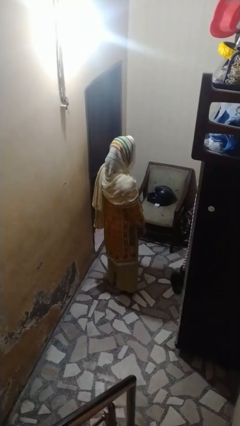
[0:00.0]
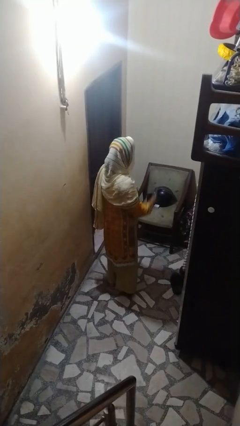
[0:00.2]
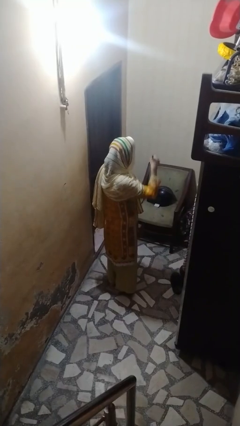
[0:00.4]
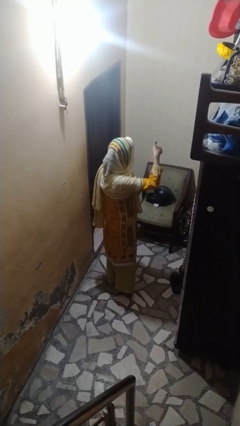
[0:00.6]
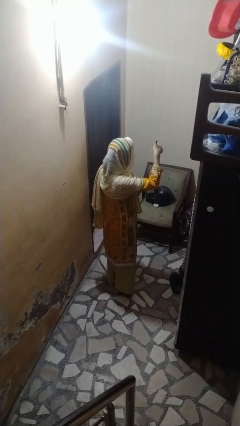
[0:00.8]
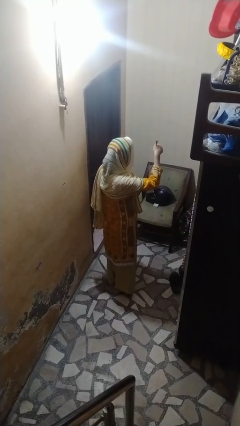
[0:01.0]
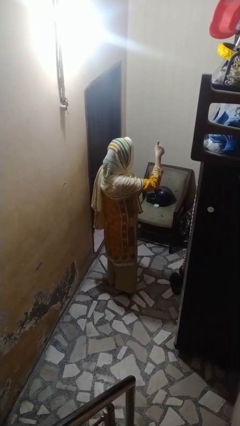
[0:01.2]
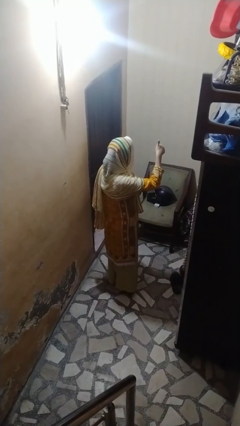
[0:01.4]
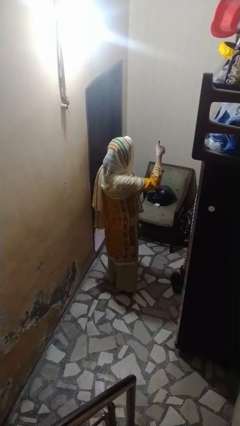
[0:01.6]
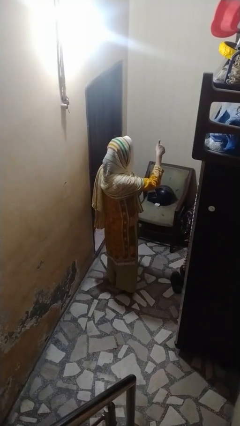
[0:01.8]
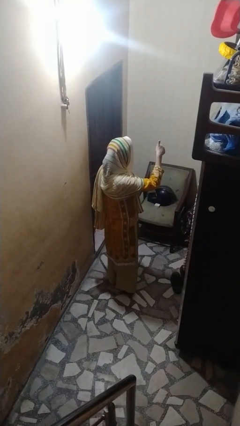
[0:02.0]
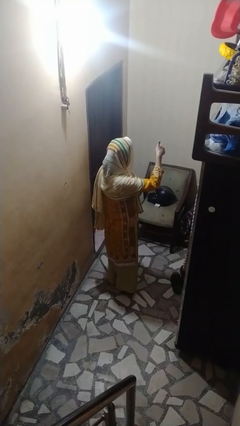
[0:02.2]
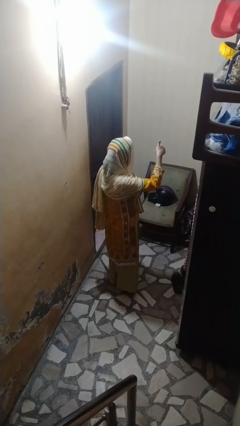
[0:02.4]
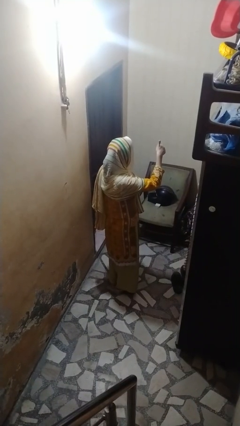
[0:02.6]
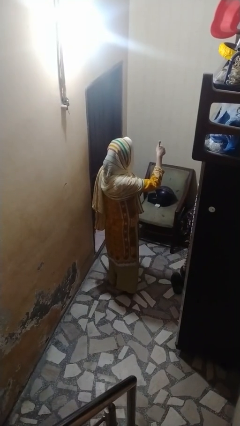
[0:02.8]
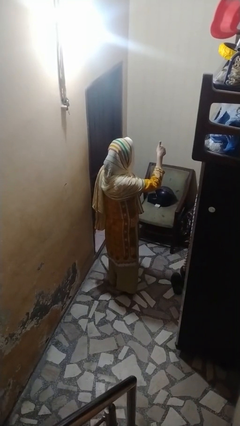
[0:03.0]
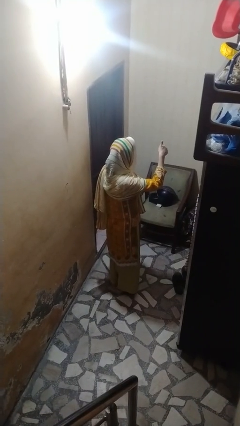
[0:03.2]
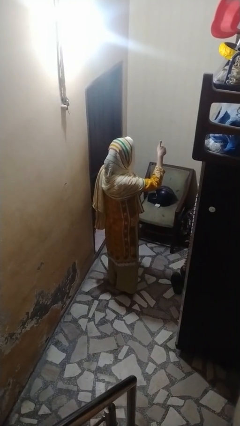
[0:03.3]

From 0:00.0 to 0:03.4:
person gestures thumbs up

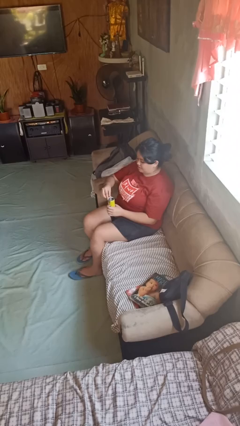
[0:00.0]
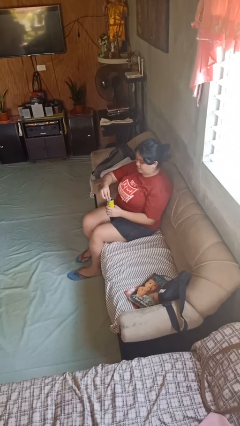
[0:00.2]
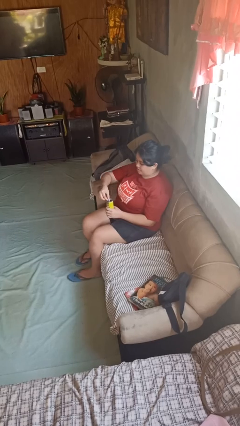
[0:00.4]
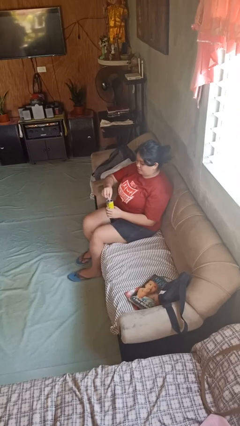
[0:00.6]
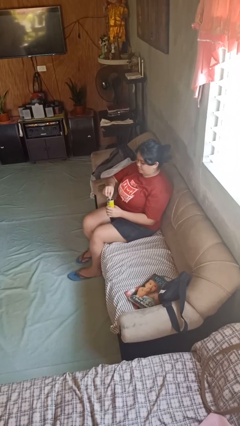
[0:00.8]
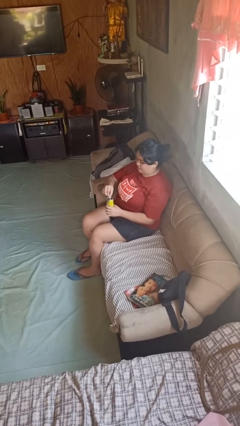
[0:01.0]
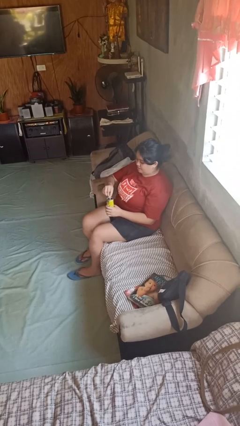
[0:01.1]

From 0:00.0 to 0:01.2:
person opens beverage can

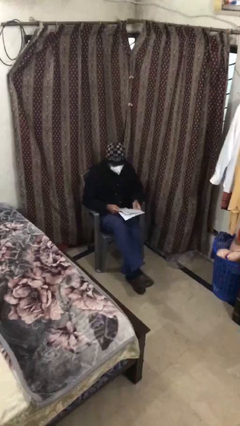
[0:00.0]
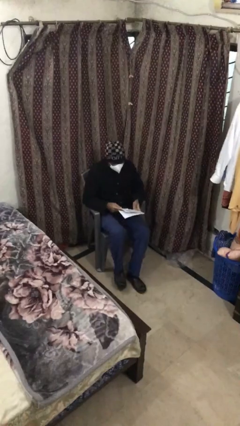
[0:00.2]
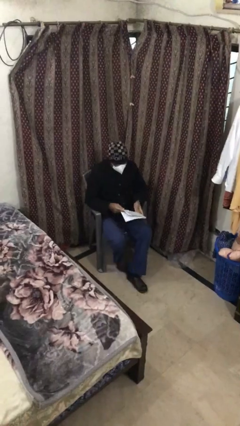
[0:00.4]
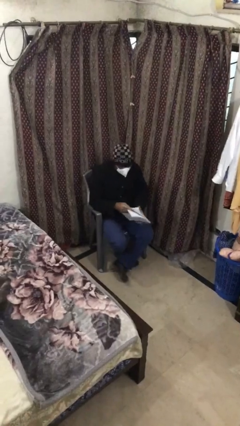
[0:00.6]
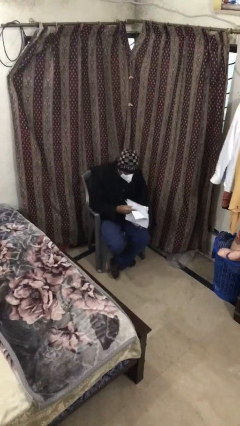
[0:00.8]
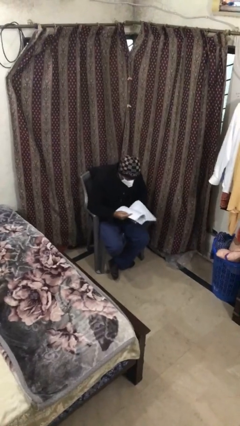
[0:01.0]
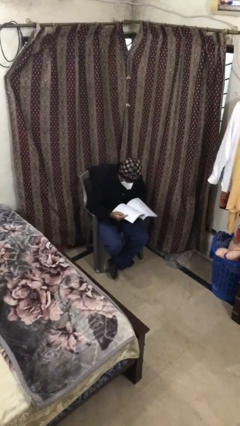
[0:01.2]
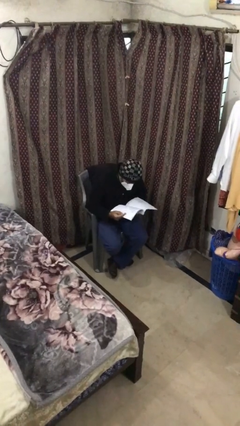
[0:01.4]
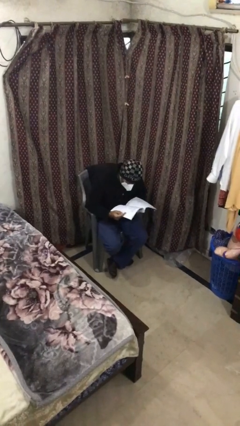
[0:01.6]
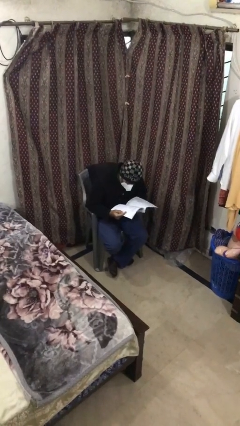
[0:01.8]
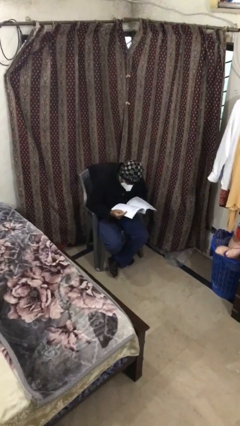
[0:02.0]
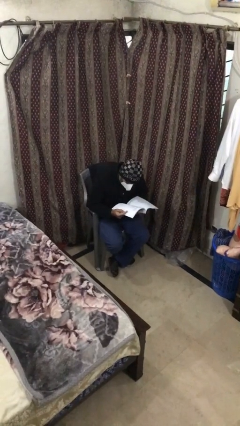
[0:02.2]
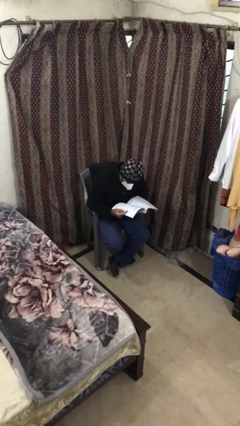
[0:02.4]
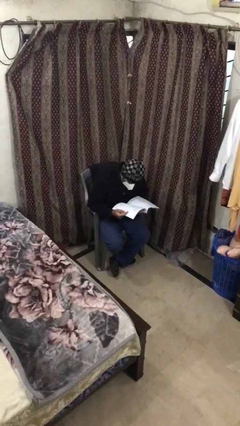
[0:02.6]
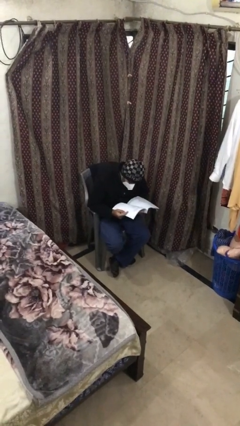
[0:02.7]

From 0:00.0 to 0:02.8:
person reads document

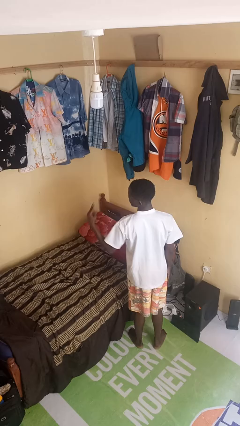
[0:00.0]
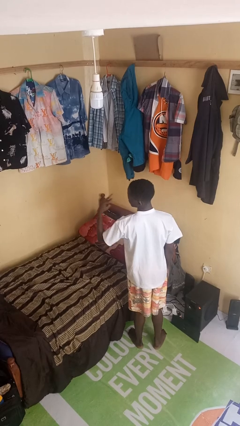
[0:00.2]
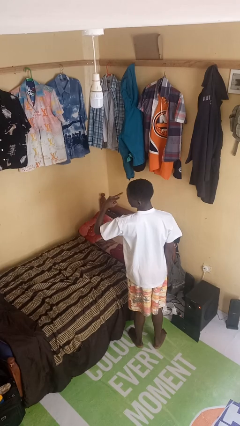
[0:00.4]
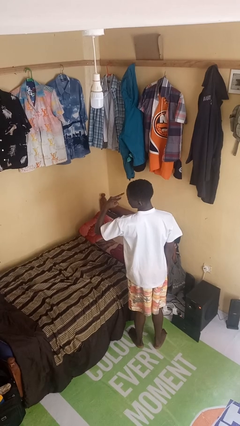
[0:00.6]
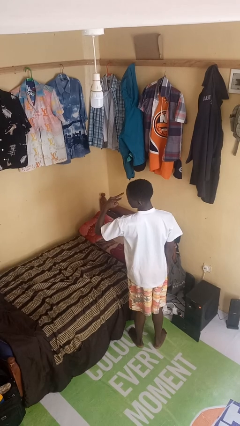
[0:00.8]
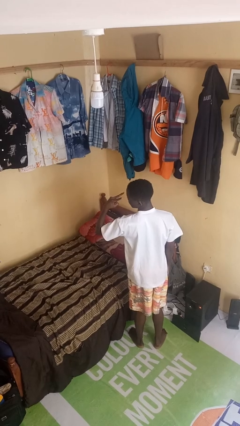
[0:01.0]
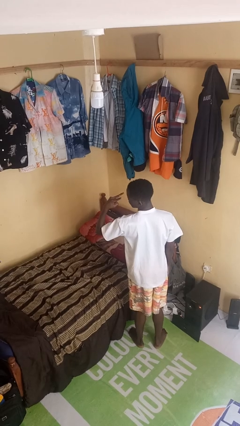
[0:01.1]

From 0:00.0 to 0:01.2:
person gestures watch closely

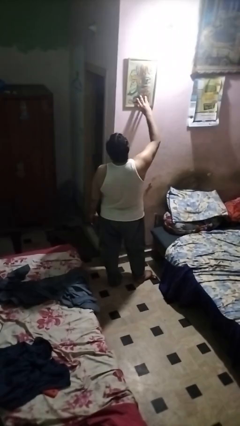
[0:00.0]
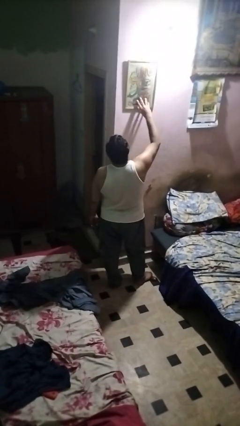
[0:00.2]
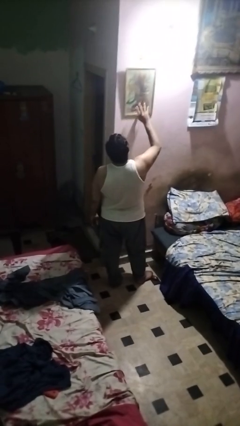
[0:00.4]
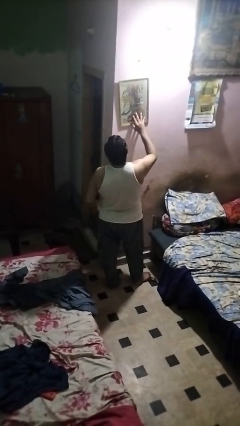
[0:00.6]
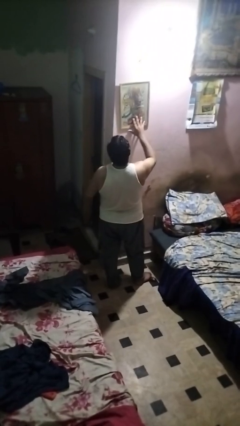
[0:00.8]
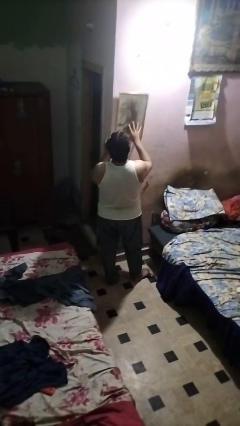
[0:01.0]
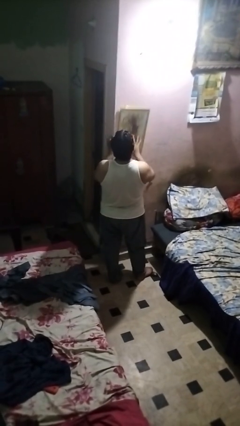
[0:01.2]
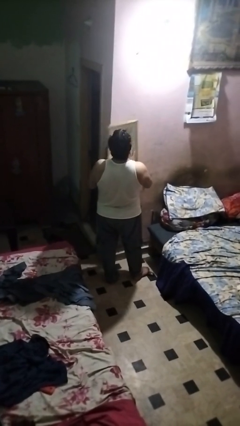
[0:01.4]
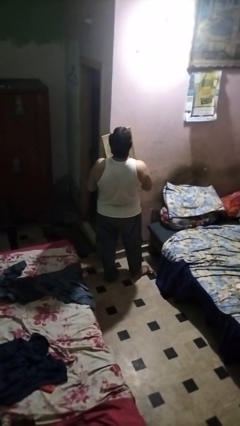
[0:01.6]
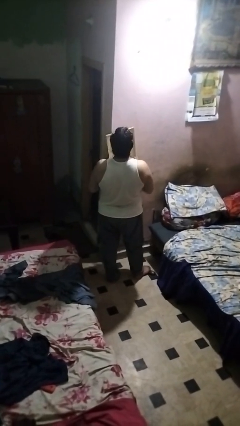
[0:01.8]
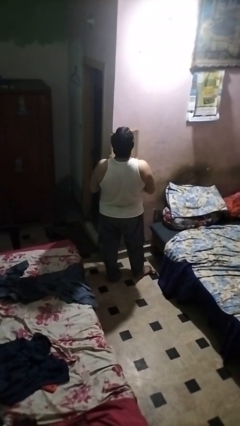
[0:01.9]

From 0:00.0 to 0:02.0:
person takes down picture frame

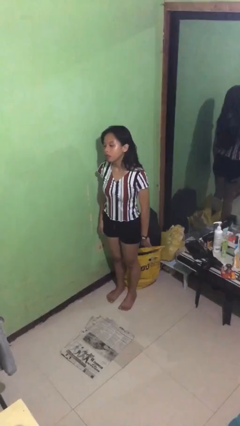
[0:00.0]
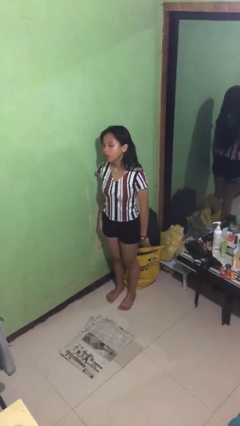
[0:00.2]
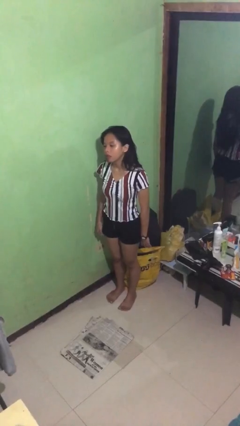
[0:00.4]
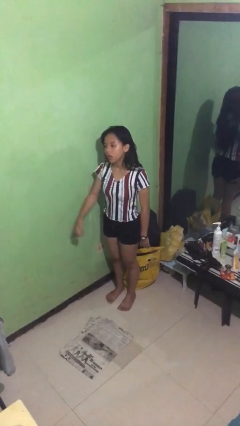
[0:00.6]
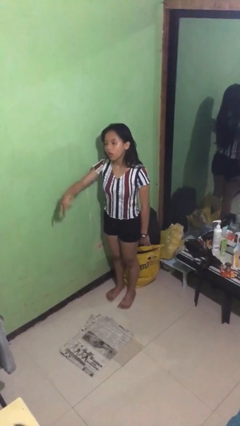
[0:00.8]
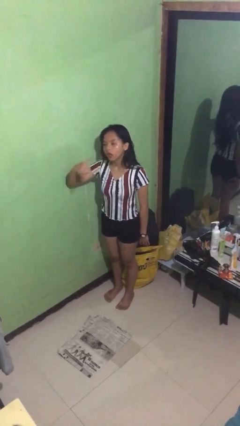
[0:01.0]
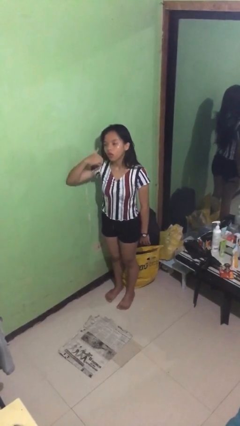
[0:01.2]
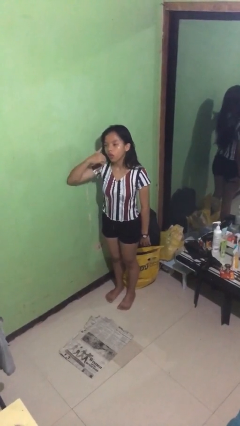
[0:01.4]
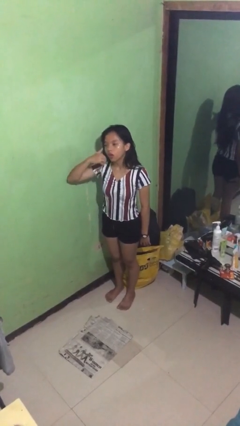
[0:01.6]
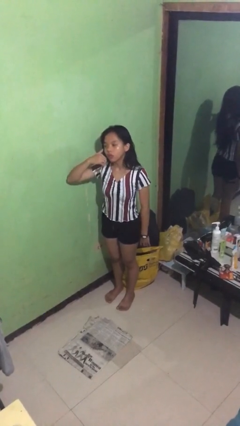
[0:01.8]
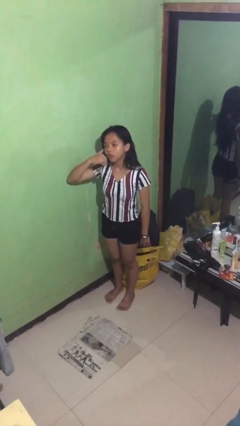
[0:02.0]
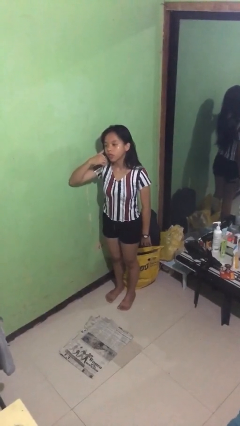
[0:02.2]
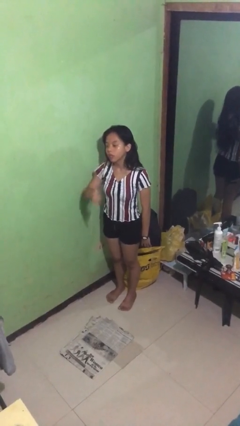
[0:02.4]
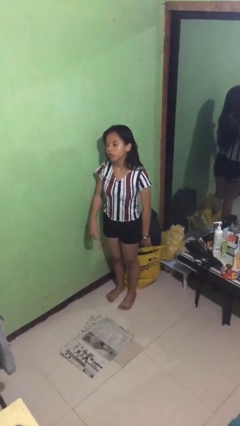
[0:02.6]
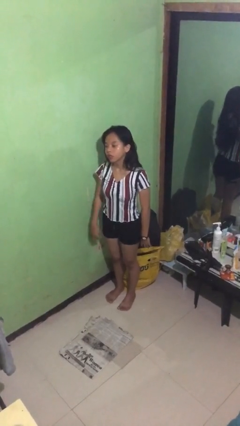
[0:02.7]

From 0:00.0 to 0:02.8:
person gestures call me

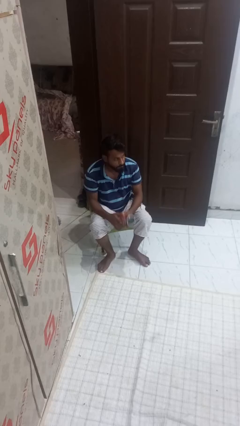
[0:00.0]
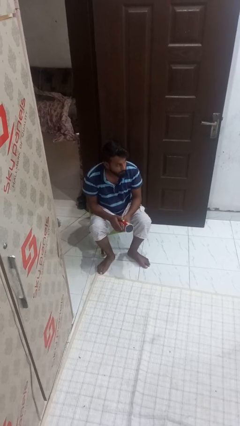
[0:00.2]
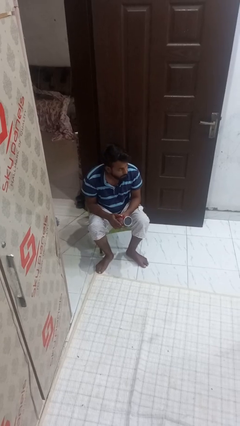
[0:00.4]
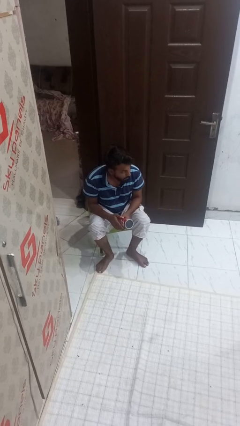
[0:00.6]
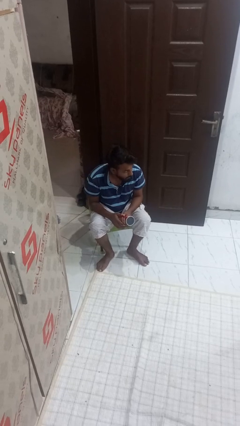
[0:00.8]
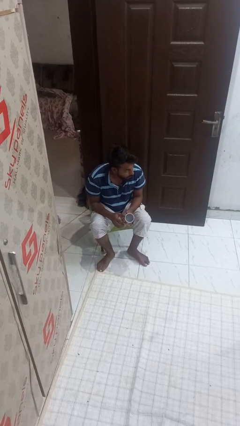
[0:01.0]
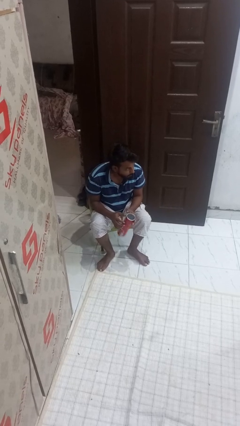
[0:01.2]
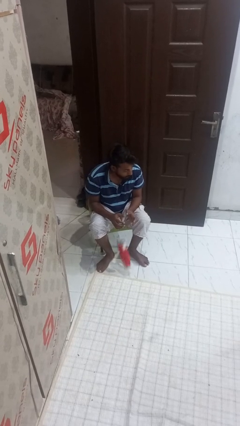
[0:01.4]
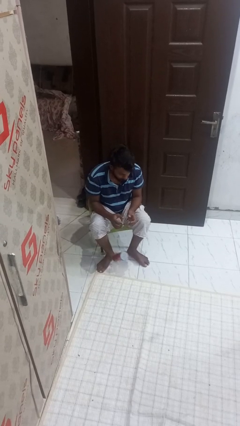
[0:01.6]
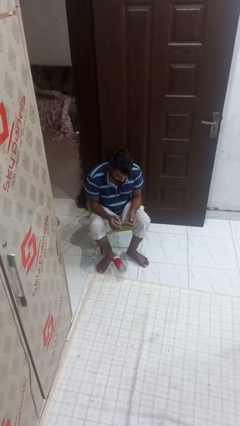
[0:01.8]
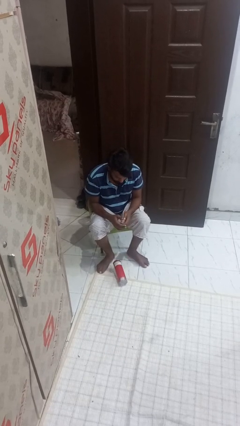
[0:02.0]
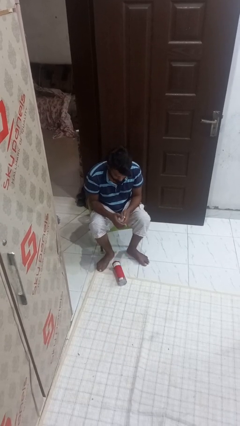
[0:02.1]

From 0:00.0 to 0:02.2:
person drops object

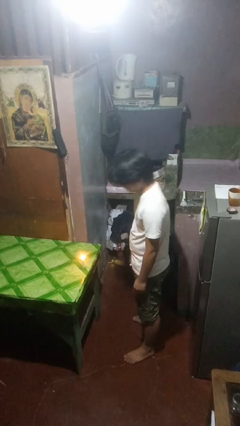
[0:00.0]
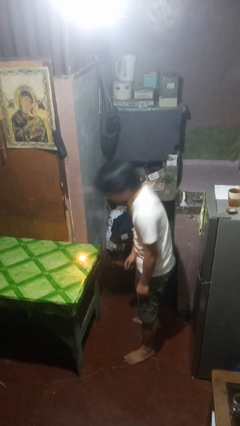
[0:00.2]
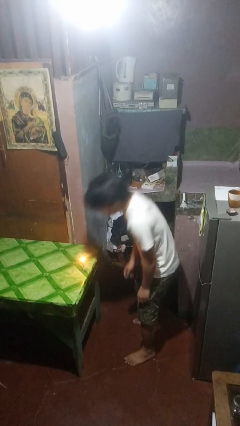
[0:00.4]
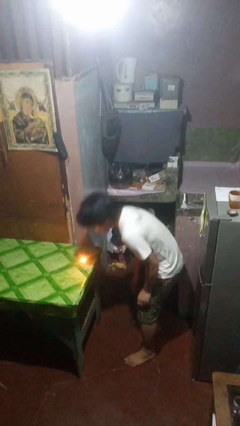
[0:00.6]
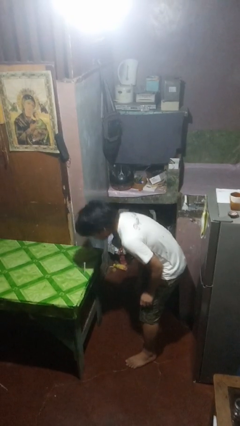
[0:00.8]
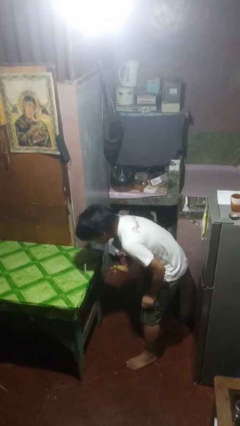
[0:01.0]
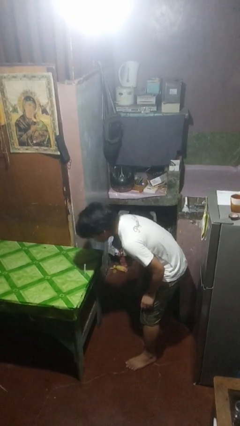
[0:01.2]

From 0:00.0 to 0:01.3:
person extinguishes candle
